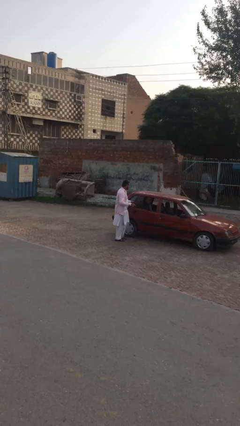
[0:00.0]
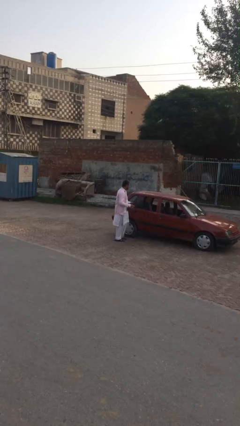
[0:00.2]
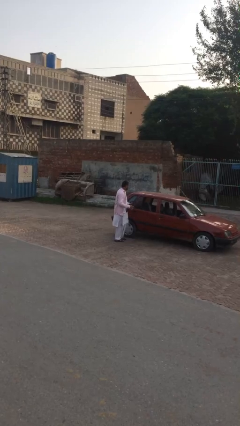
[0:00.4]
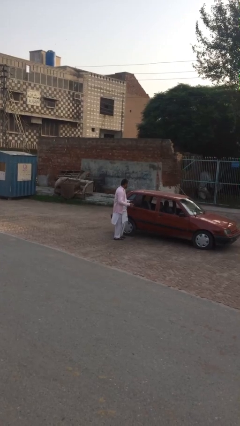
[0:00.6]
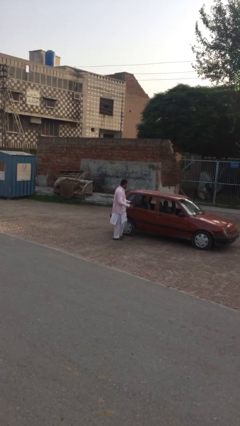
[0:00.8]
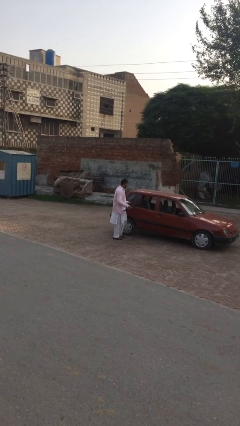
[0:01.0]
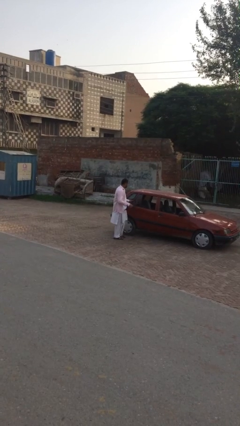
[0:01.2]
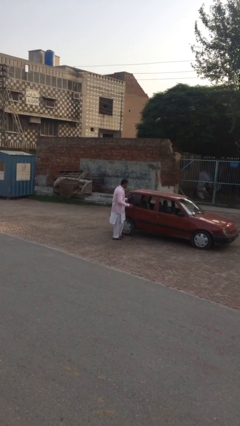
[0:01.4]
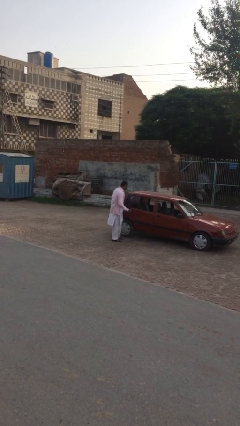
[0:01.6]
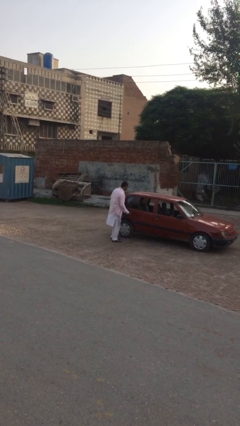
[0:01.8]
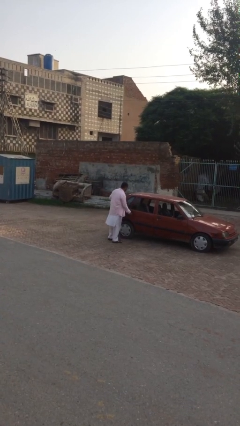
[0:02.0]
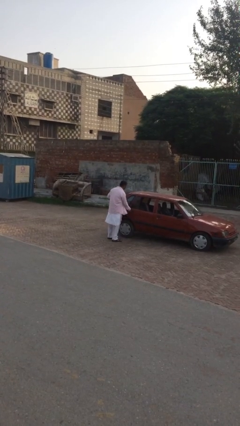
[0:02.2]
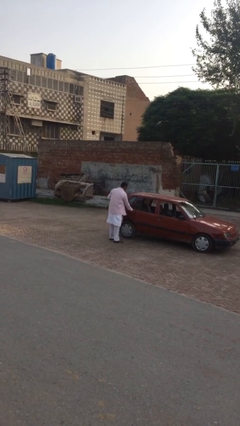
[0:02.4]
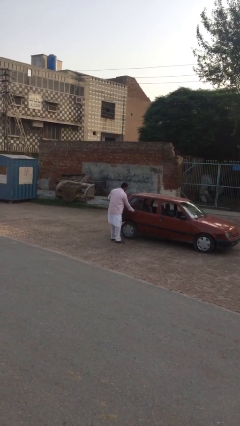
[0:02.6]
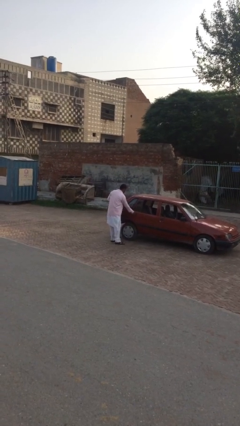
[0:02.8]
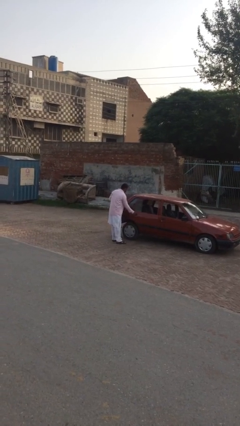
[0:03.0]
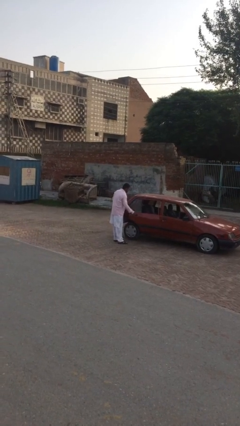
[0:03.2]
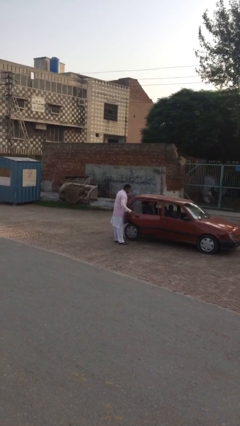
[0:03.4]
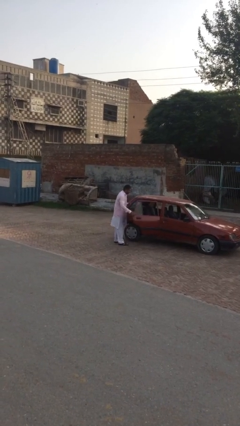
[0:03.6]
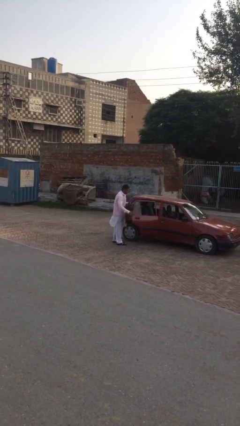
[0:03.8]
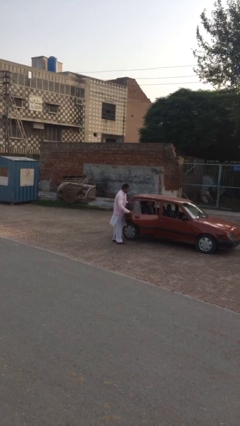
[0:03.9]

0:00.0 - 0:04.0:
person opens car door

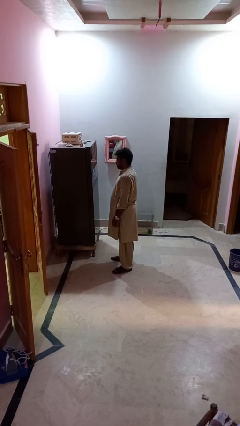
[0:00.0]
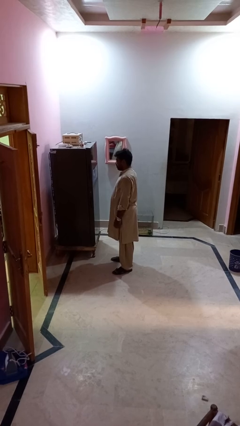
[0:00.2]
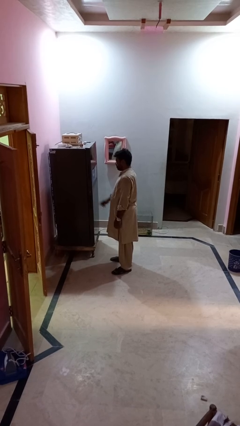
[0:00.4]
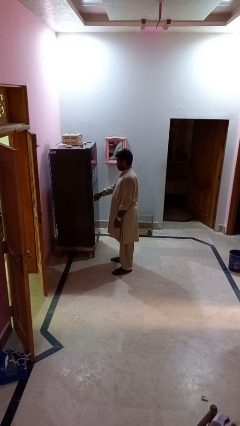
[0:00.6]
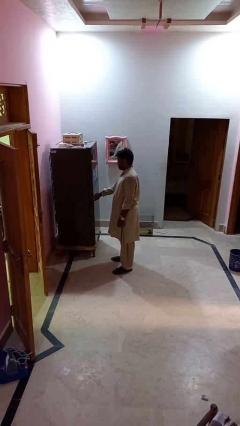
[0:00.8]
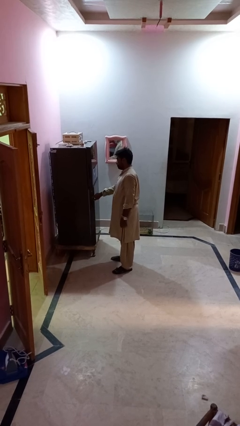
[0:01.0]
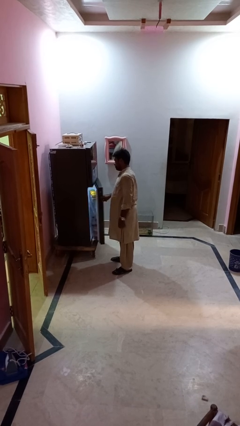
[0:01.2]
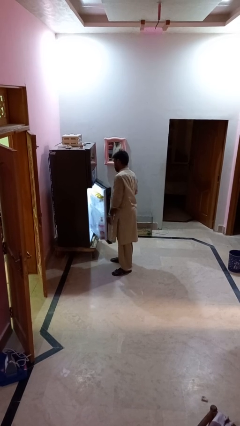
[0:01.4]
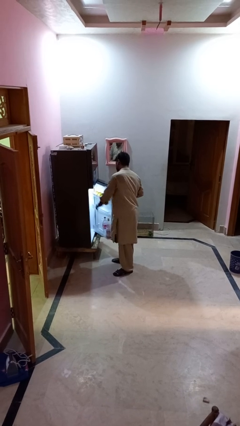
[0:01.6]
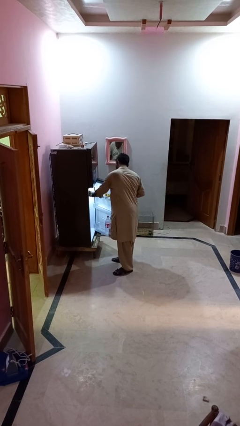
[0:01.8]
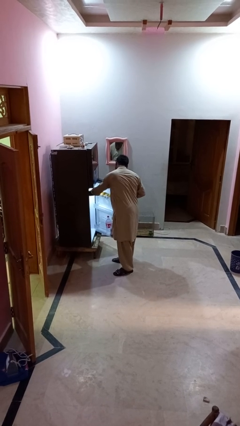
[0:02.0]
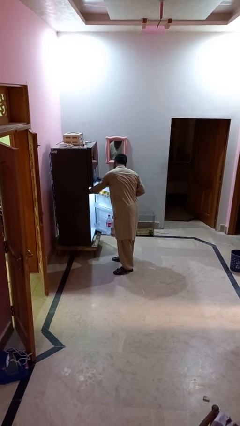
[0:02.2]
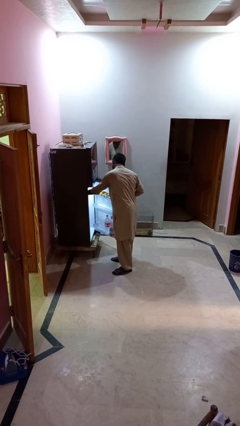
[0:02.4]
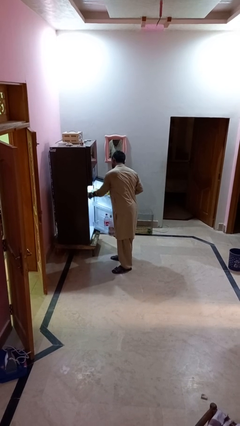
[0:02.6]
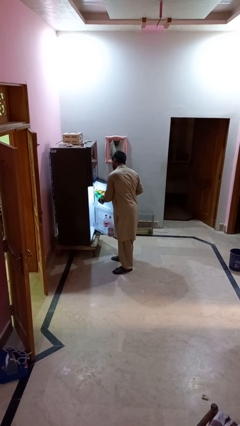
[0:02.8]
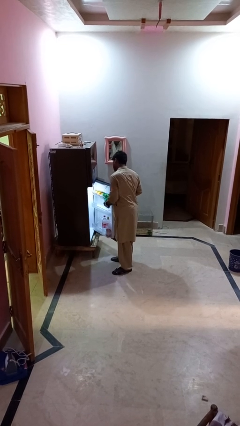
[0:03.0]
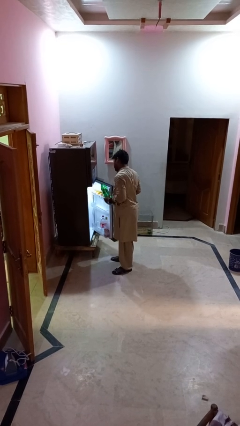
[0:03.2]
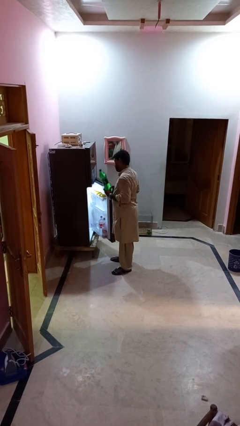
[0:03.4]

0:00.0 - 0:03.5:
person takes object from refrigerator

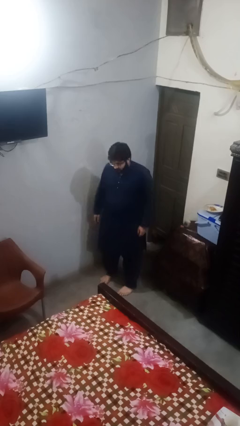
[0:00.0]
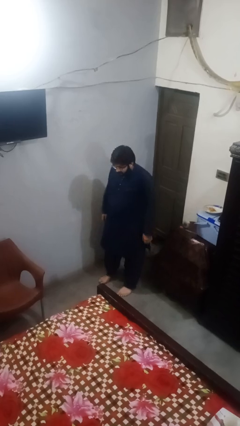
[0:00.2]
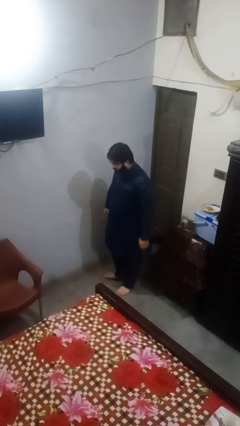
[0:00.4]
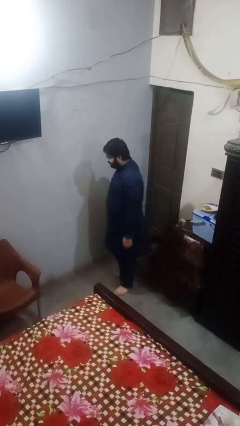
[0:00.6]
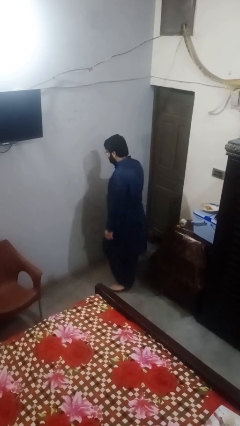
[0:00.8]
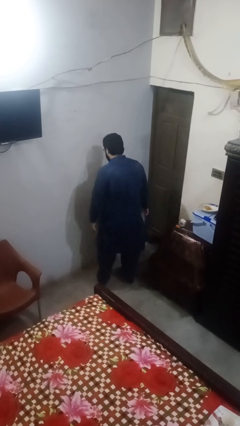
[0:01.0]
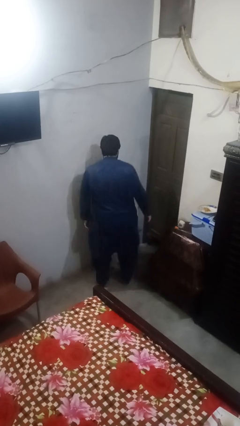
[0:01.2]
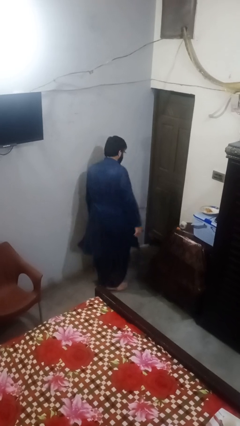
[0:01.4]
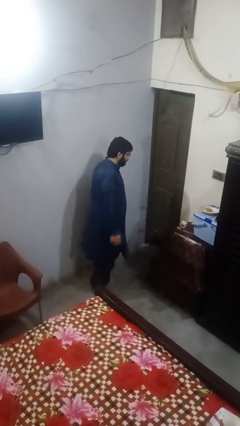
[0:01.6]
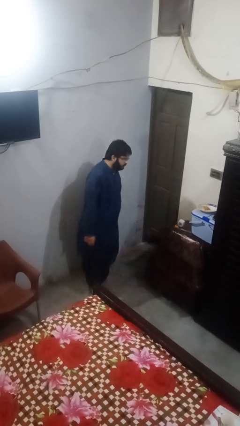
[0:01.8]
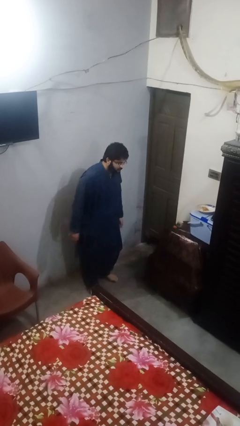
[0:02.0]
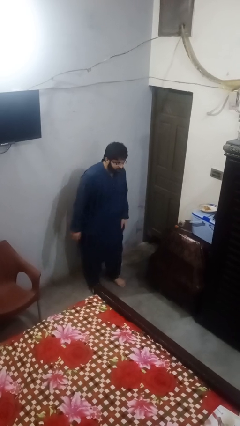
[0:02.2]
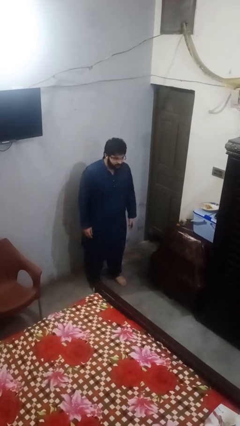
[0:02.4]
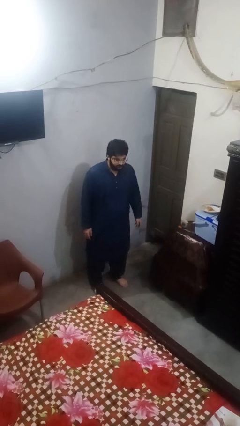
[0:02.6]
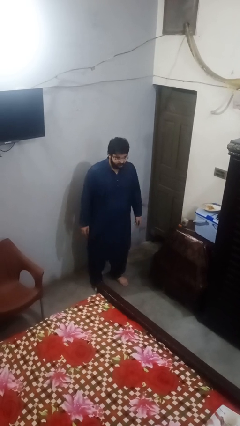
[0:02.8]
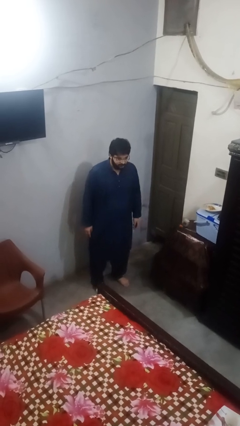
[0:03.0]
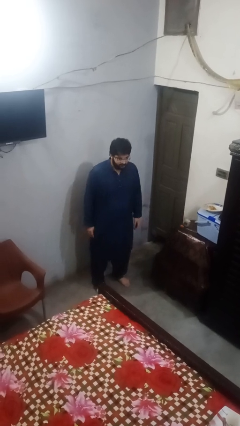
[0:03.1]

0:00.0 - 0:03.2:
person twirls

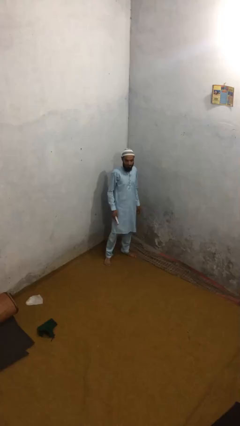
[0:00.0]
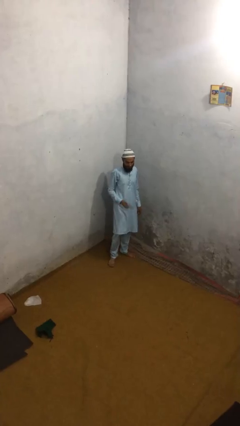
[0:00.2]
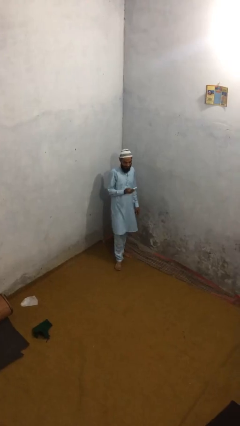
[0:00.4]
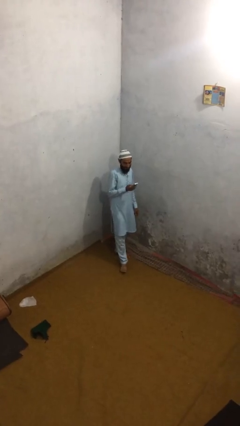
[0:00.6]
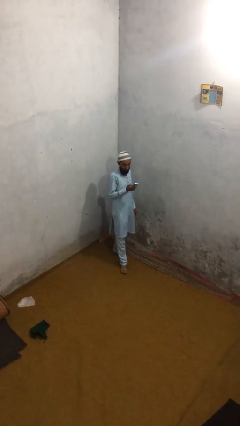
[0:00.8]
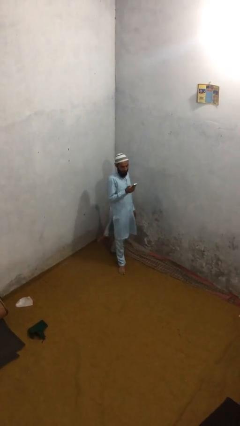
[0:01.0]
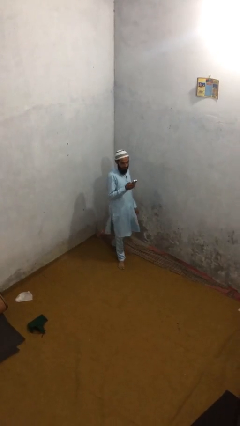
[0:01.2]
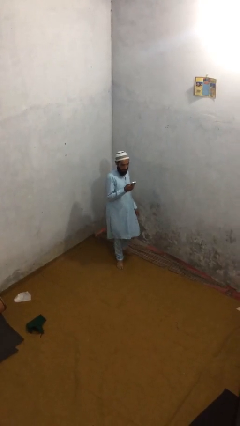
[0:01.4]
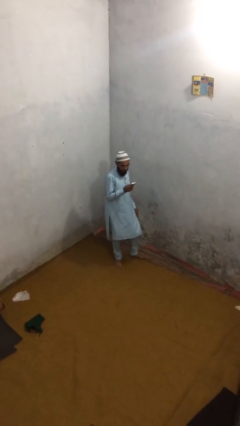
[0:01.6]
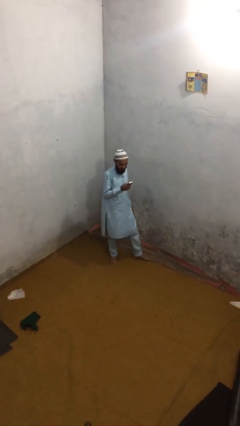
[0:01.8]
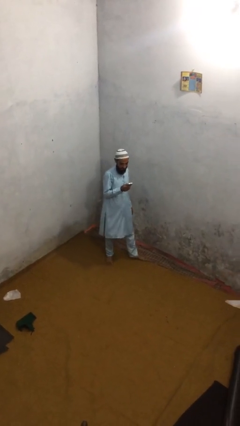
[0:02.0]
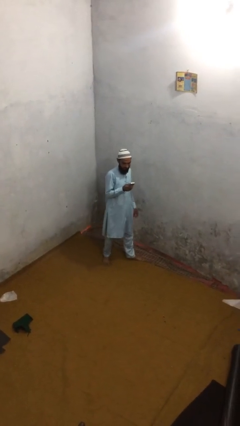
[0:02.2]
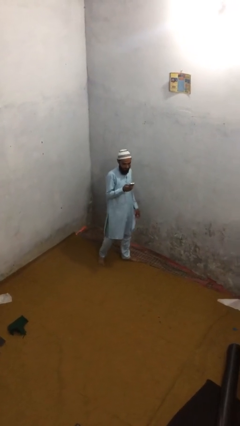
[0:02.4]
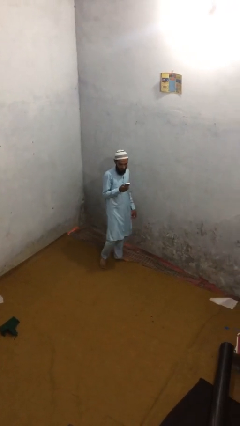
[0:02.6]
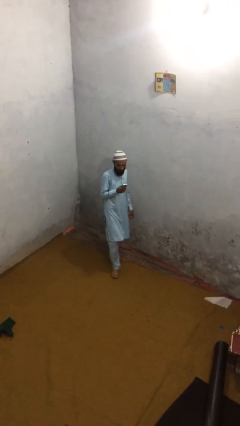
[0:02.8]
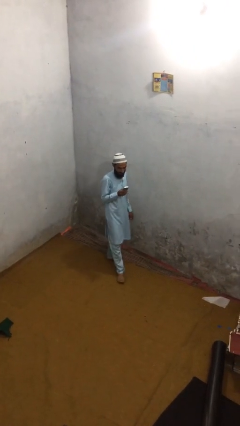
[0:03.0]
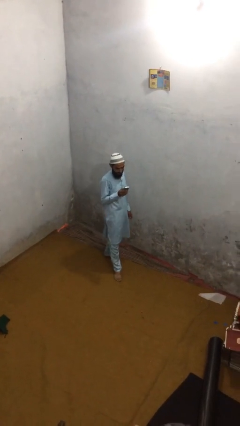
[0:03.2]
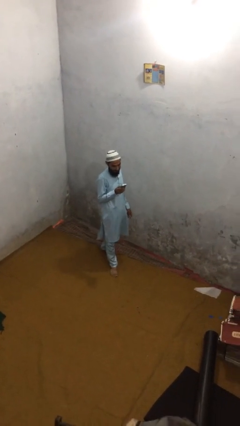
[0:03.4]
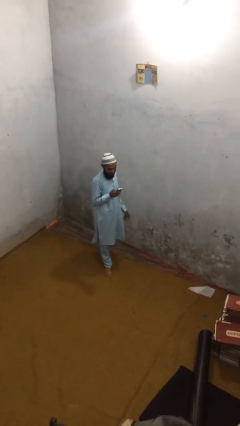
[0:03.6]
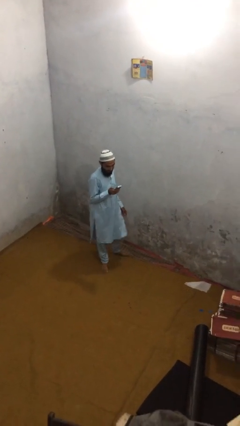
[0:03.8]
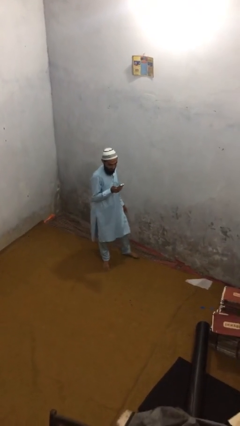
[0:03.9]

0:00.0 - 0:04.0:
person texts on phone

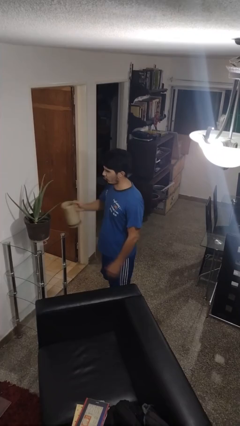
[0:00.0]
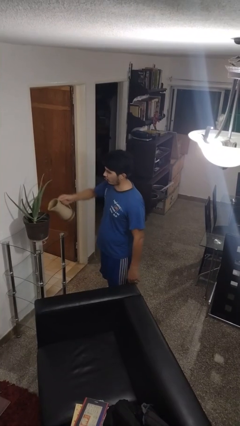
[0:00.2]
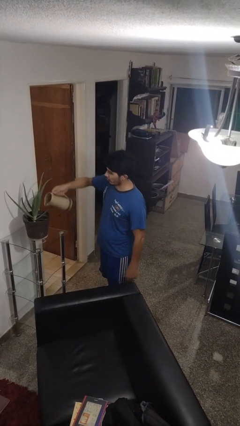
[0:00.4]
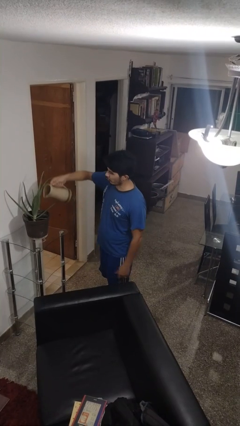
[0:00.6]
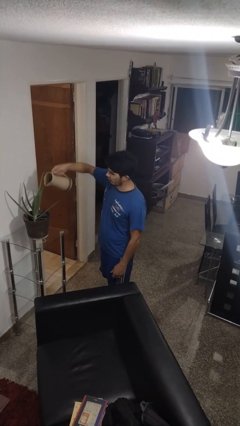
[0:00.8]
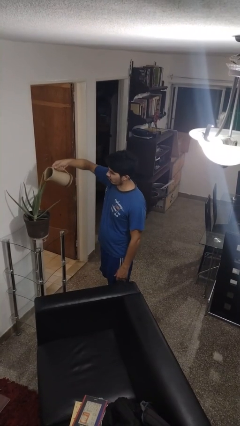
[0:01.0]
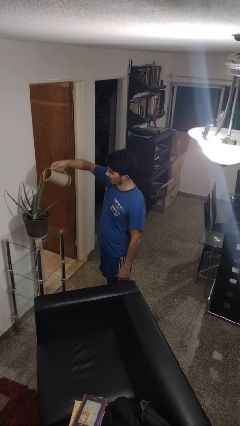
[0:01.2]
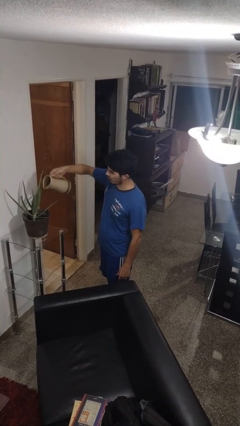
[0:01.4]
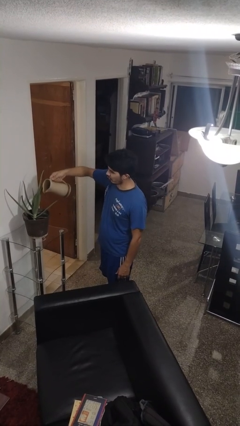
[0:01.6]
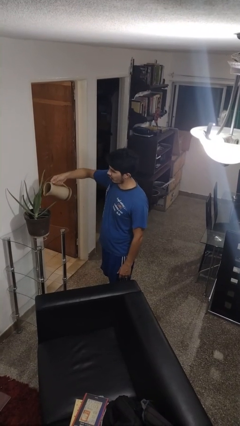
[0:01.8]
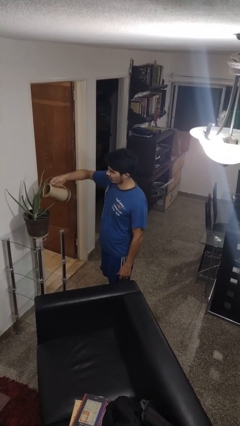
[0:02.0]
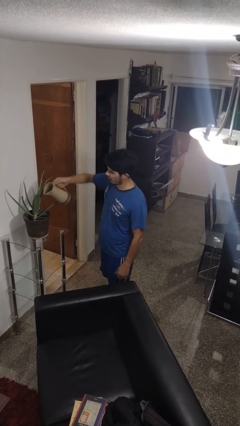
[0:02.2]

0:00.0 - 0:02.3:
person waters houseplant

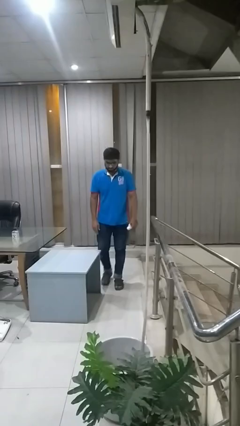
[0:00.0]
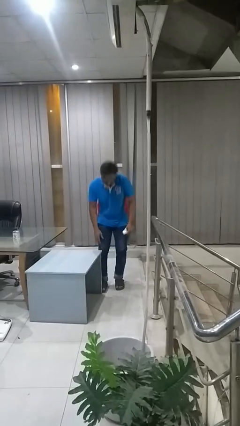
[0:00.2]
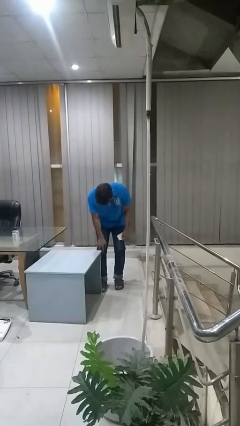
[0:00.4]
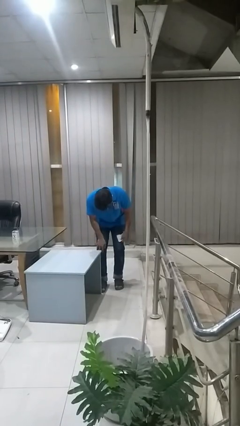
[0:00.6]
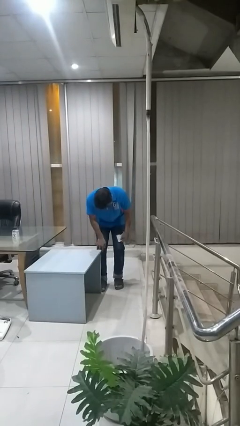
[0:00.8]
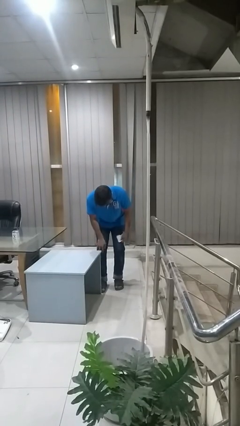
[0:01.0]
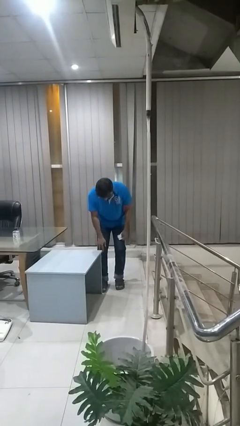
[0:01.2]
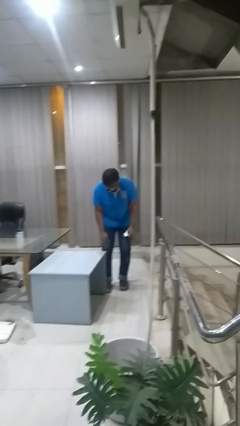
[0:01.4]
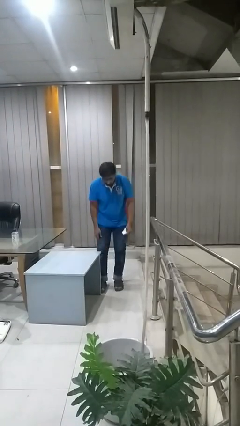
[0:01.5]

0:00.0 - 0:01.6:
person bumps into table
